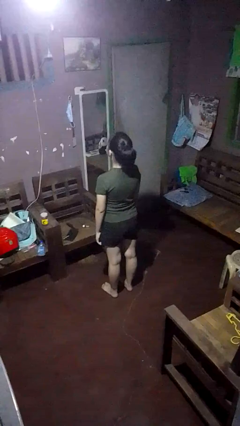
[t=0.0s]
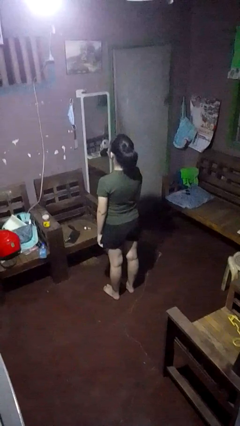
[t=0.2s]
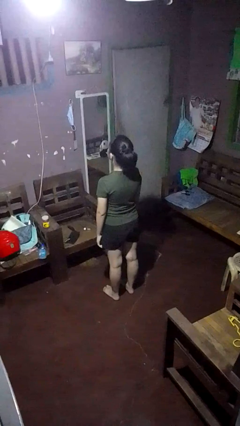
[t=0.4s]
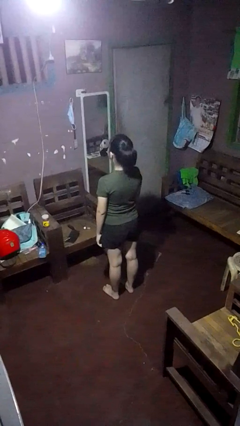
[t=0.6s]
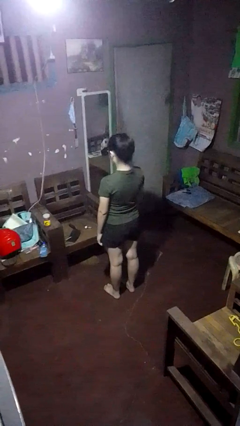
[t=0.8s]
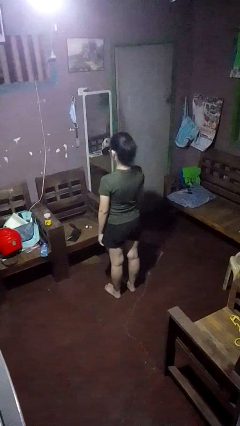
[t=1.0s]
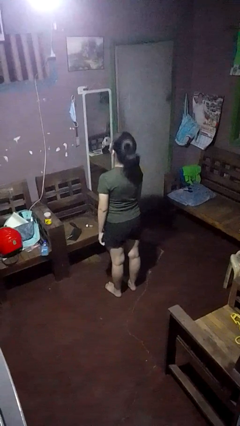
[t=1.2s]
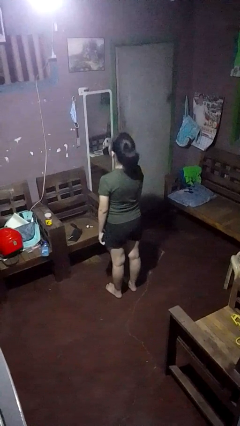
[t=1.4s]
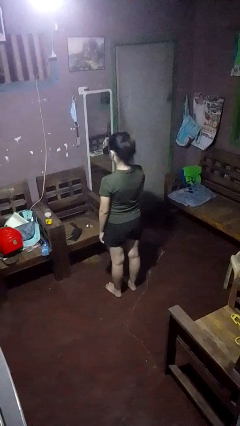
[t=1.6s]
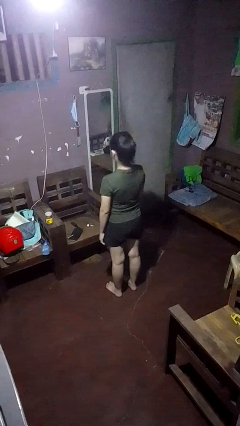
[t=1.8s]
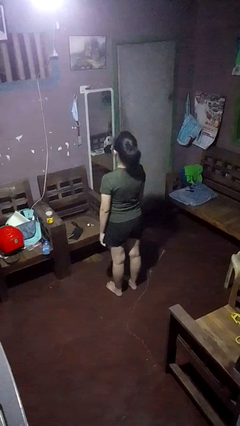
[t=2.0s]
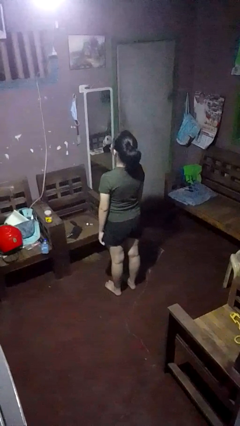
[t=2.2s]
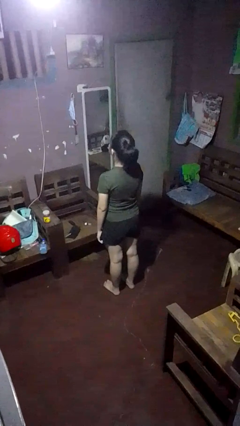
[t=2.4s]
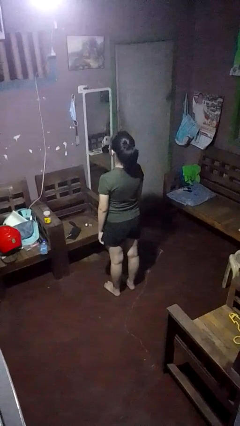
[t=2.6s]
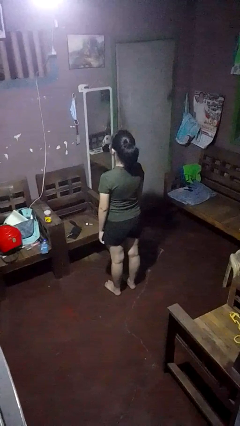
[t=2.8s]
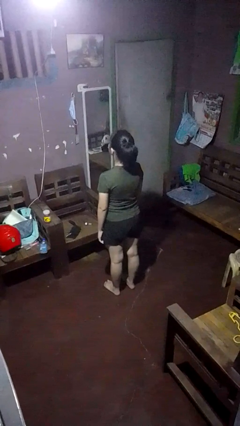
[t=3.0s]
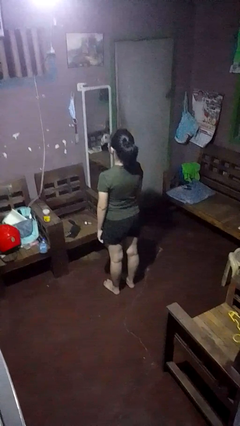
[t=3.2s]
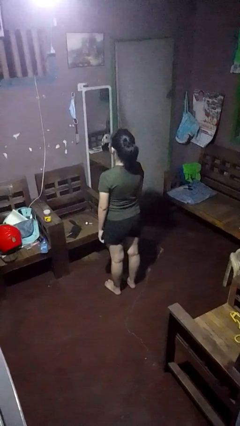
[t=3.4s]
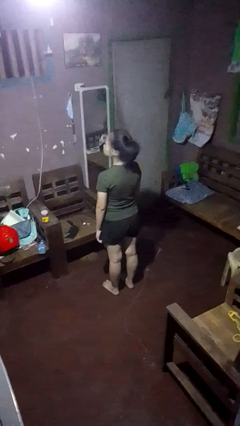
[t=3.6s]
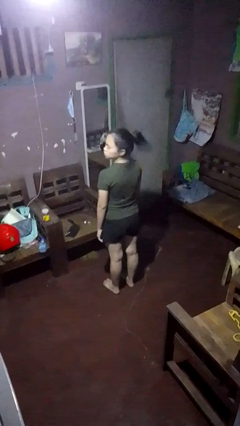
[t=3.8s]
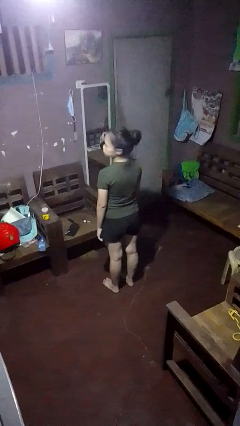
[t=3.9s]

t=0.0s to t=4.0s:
person nods head

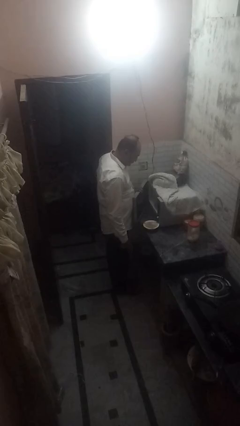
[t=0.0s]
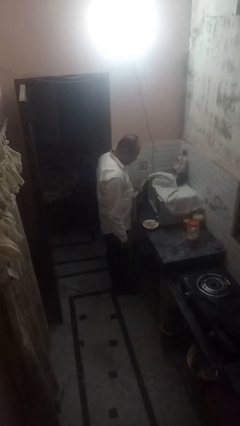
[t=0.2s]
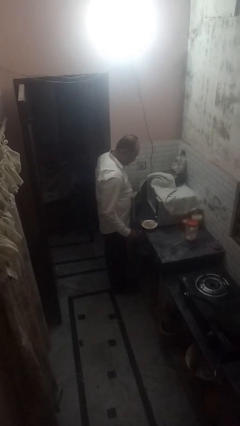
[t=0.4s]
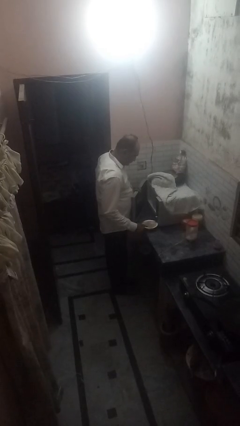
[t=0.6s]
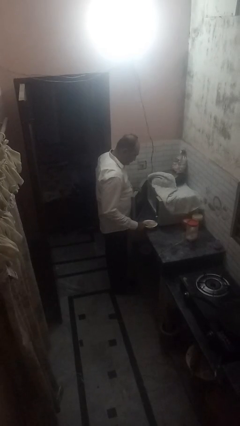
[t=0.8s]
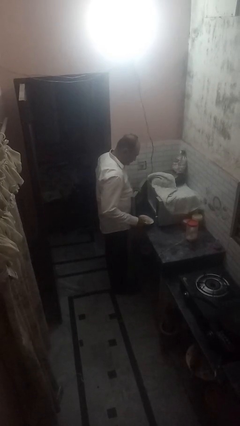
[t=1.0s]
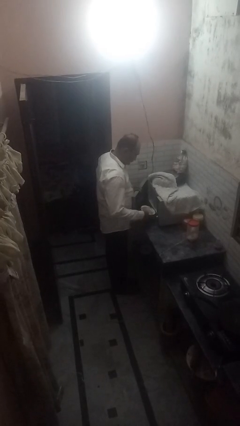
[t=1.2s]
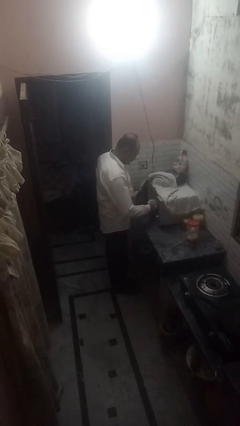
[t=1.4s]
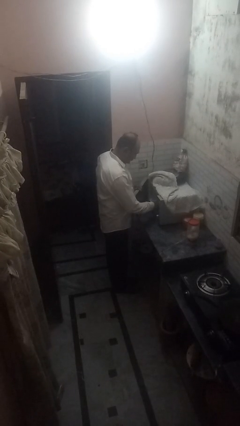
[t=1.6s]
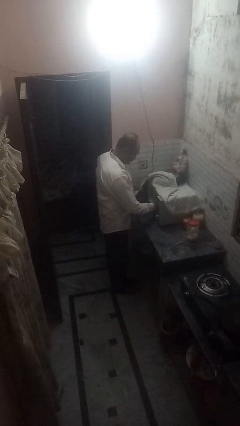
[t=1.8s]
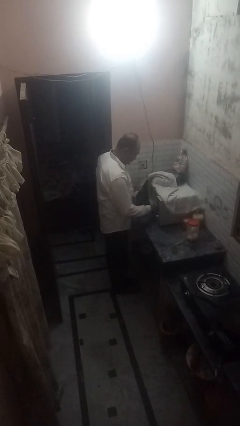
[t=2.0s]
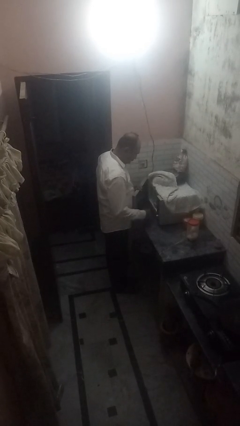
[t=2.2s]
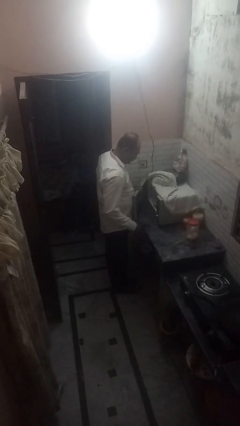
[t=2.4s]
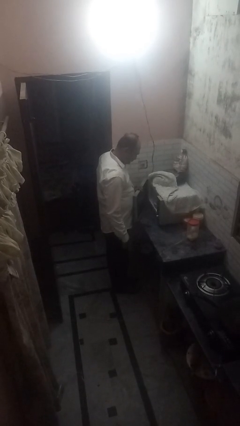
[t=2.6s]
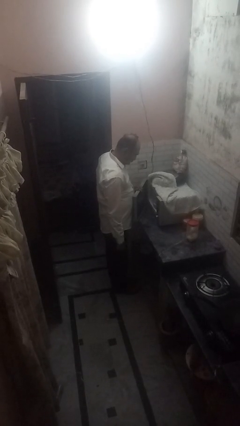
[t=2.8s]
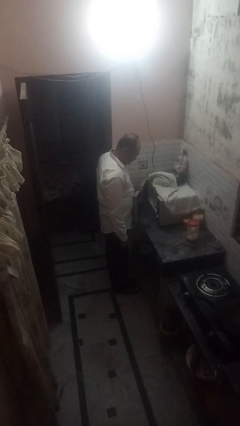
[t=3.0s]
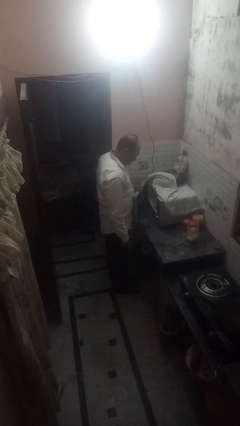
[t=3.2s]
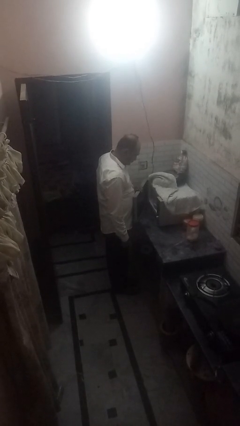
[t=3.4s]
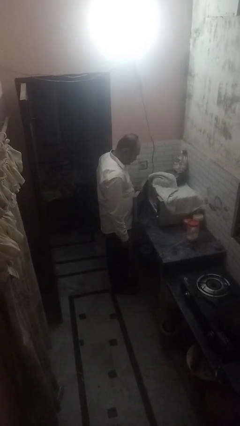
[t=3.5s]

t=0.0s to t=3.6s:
person puts object into microwave

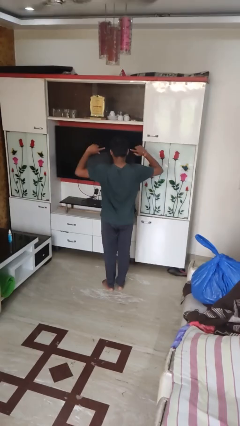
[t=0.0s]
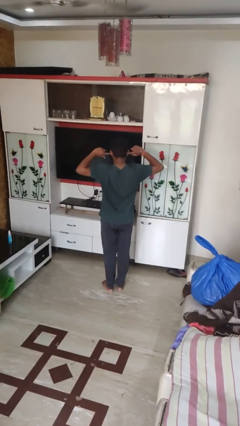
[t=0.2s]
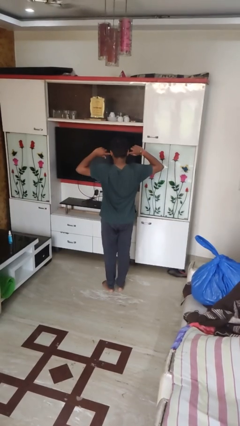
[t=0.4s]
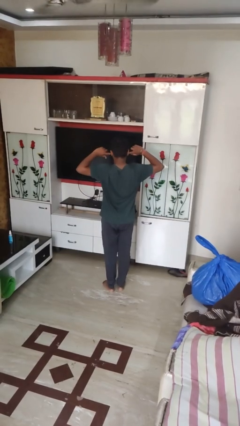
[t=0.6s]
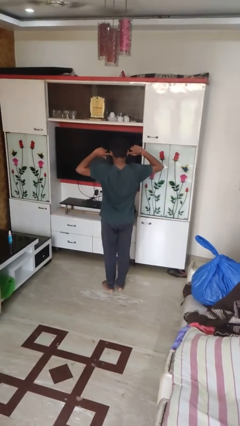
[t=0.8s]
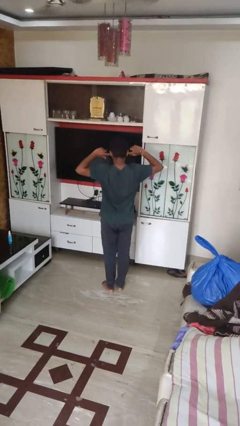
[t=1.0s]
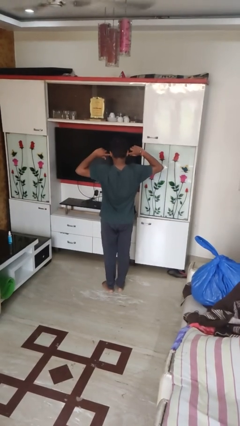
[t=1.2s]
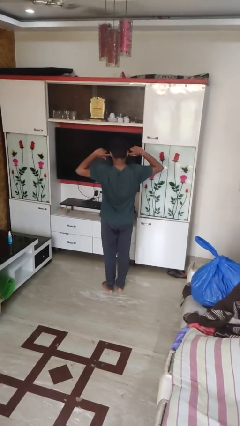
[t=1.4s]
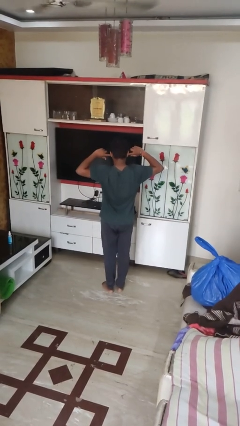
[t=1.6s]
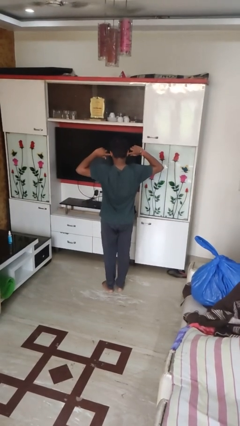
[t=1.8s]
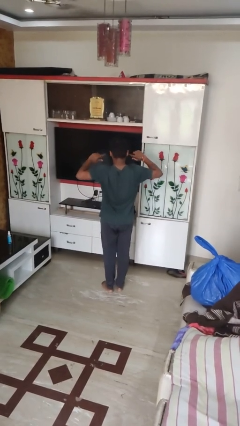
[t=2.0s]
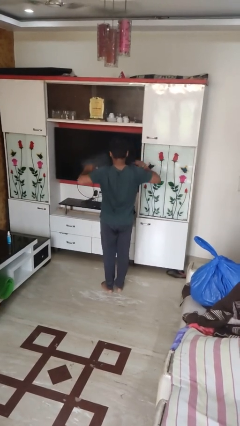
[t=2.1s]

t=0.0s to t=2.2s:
person puts fingers in ear

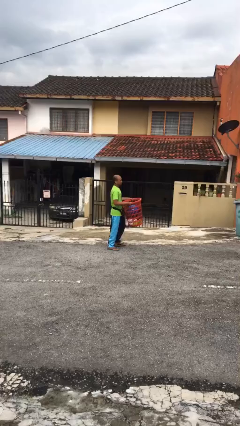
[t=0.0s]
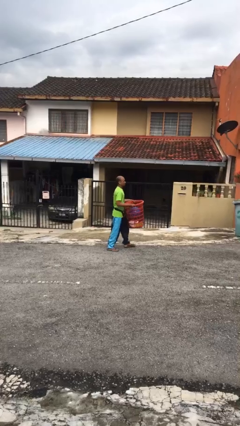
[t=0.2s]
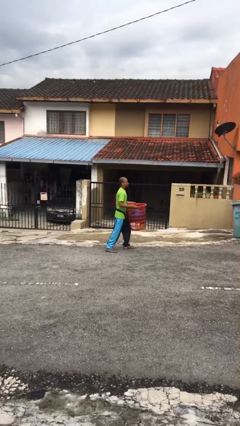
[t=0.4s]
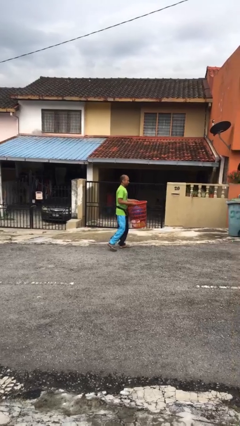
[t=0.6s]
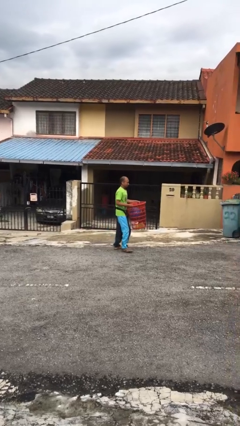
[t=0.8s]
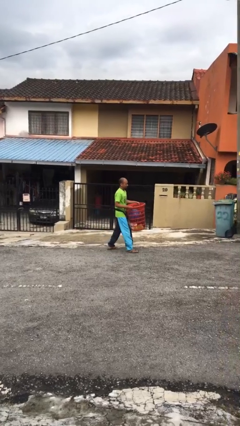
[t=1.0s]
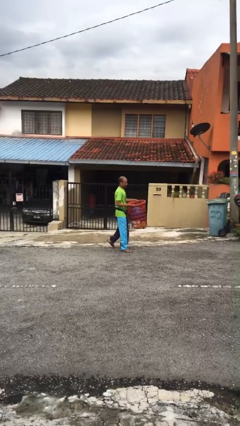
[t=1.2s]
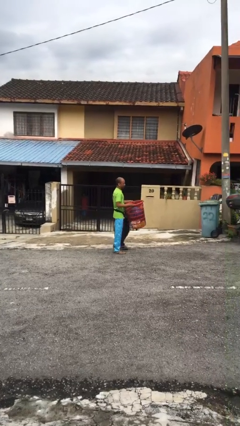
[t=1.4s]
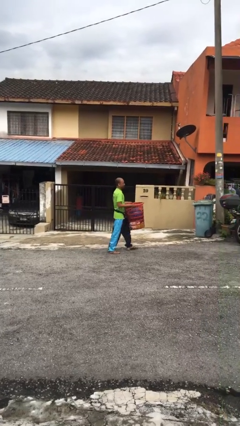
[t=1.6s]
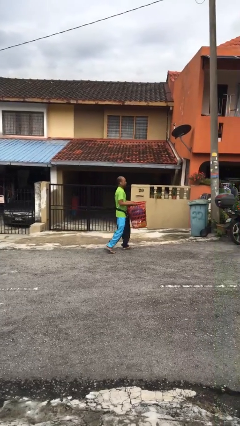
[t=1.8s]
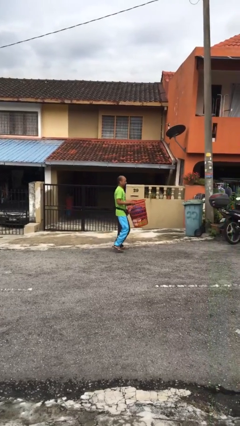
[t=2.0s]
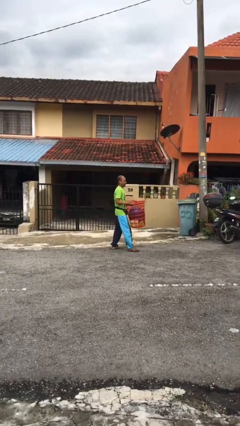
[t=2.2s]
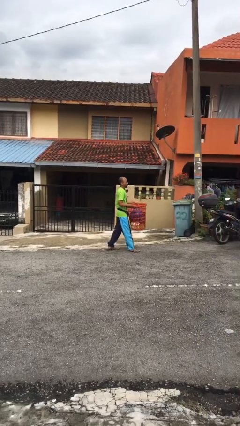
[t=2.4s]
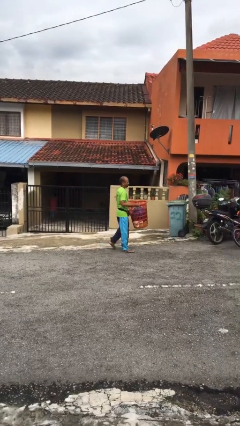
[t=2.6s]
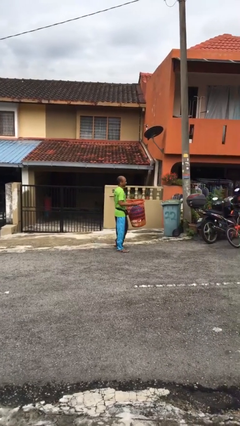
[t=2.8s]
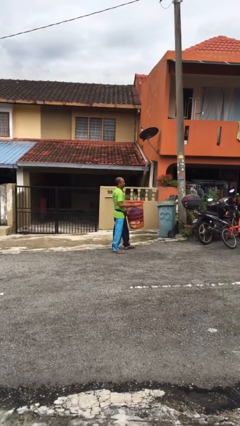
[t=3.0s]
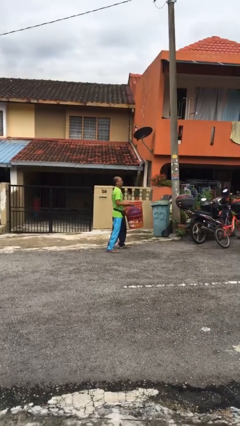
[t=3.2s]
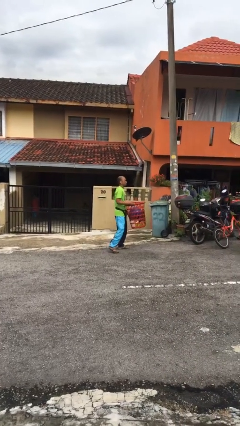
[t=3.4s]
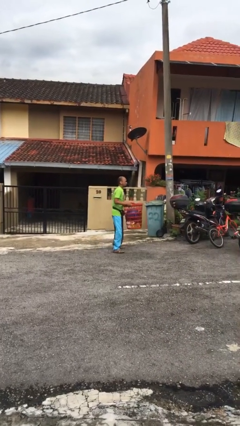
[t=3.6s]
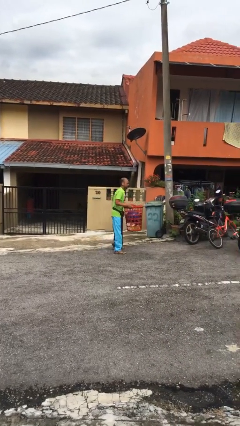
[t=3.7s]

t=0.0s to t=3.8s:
person carries heavy object

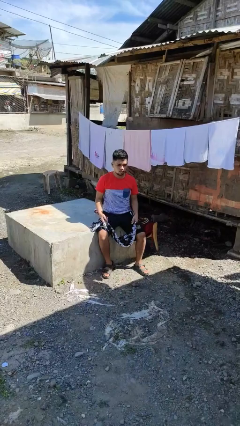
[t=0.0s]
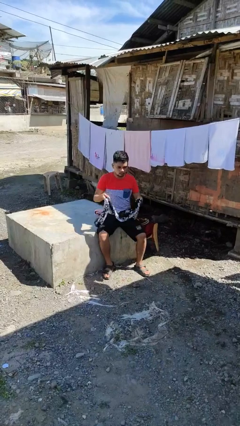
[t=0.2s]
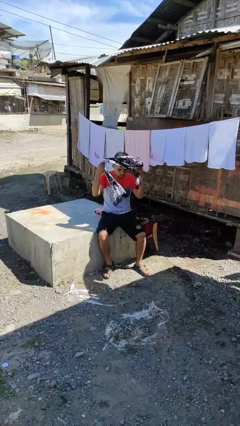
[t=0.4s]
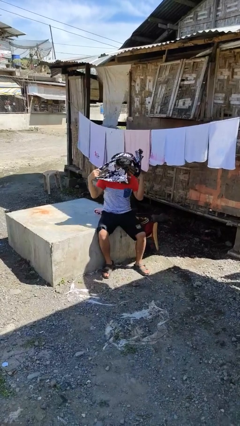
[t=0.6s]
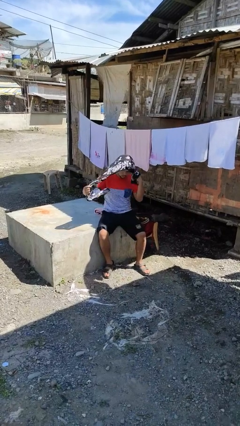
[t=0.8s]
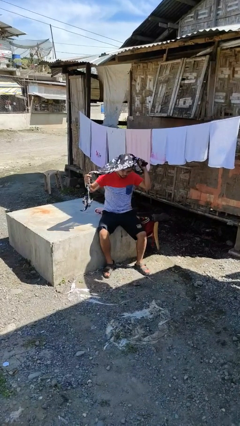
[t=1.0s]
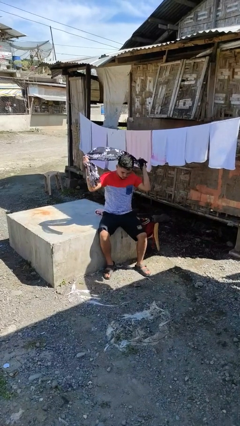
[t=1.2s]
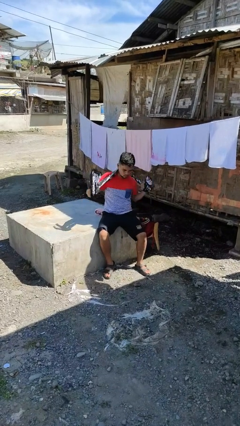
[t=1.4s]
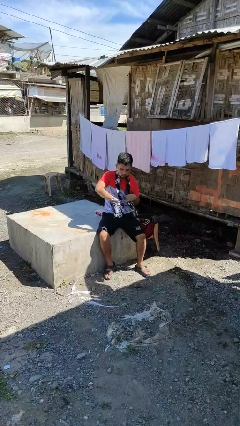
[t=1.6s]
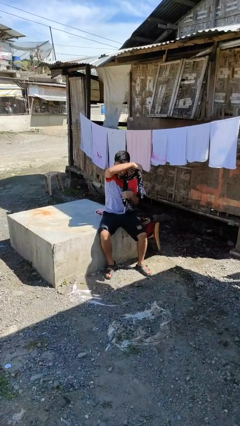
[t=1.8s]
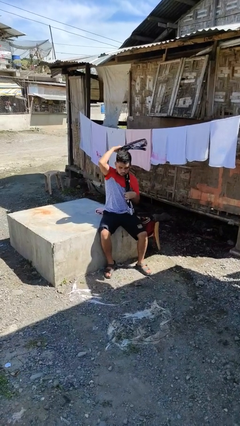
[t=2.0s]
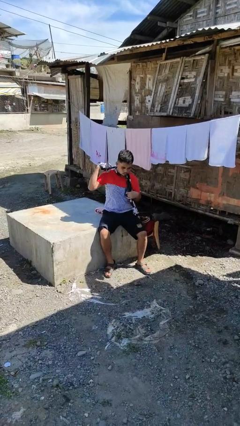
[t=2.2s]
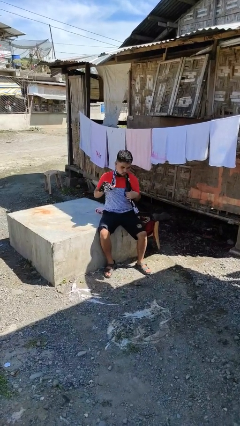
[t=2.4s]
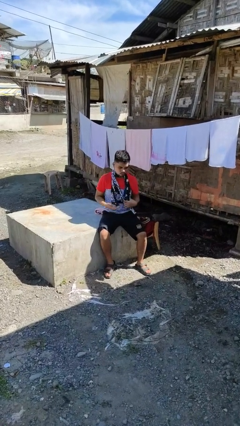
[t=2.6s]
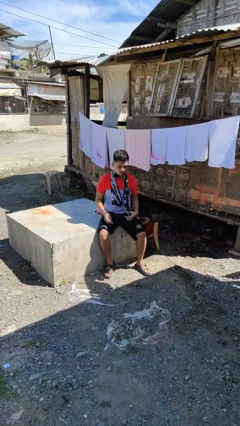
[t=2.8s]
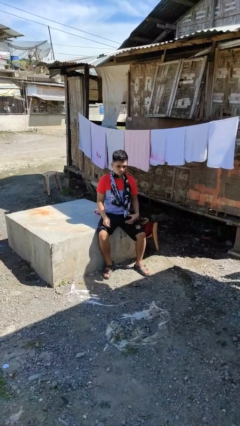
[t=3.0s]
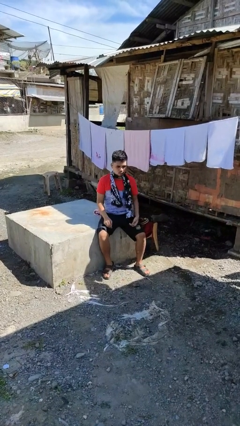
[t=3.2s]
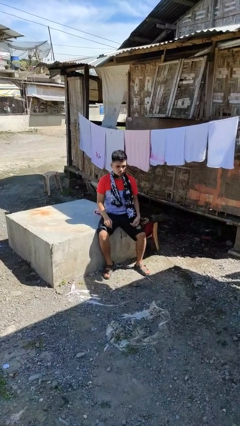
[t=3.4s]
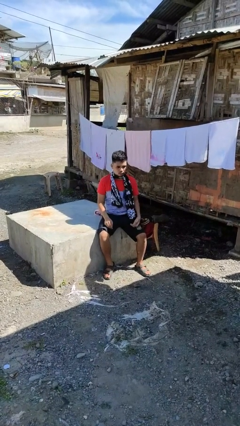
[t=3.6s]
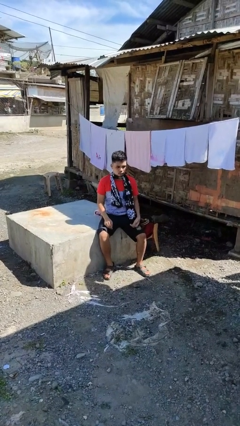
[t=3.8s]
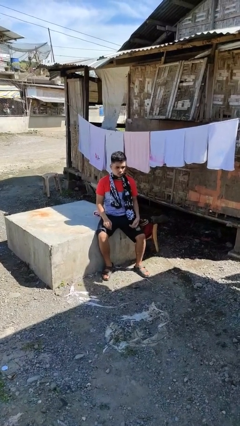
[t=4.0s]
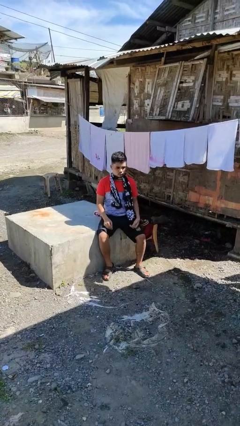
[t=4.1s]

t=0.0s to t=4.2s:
person puts on scarf
